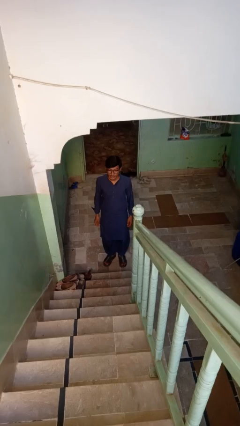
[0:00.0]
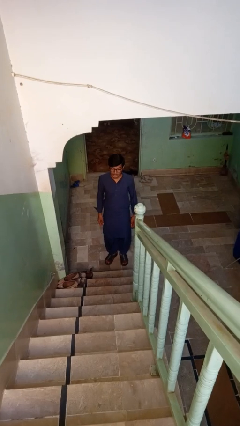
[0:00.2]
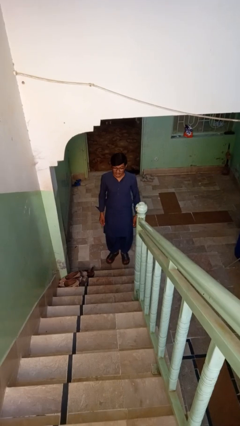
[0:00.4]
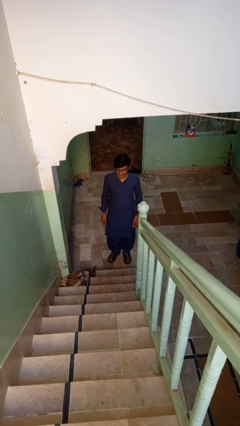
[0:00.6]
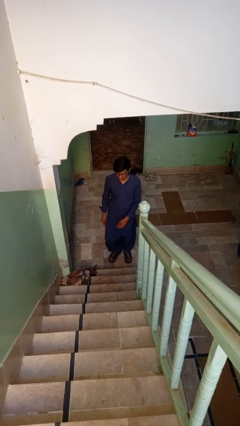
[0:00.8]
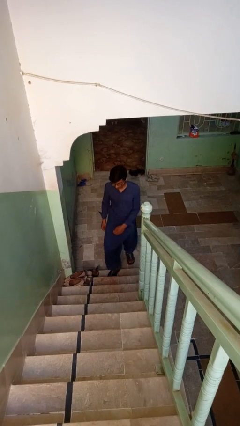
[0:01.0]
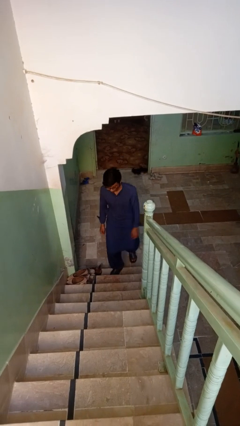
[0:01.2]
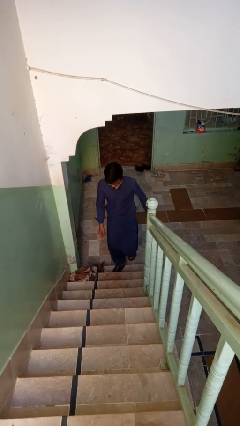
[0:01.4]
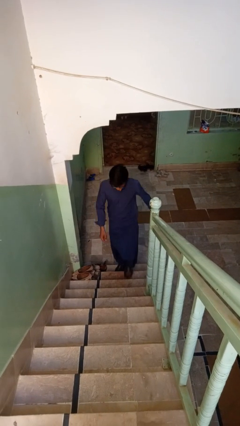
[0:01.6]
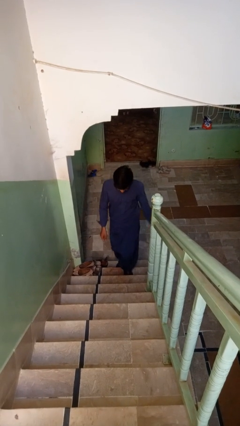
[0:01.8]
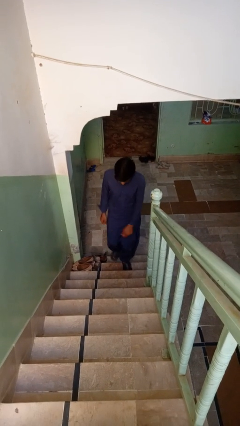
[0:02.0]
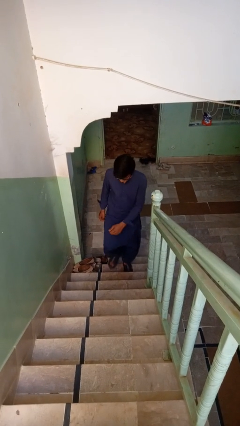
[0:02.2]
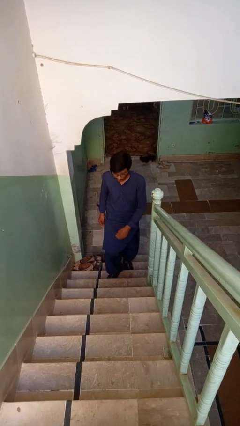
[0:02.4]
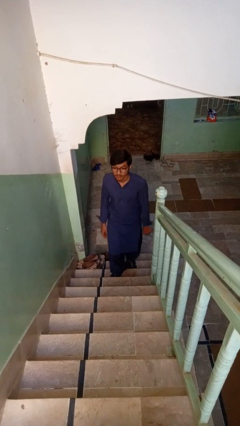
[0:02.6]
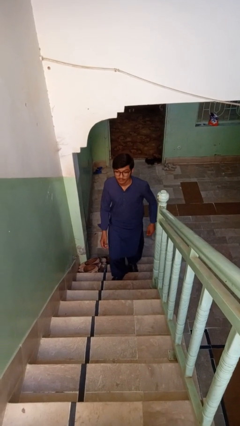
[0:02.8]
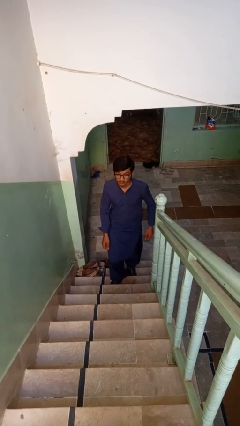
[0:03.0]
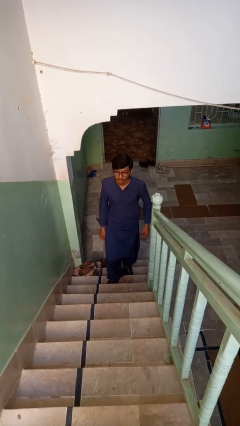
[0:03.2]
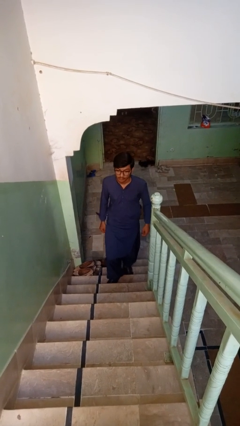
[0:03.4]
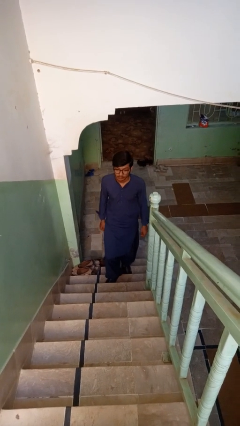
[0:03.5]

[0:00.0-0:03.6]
person climbs up stairs

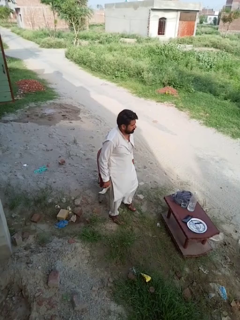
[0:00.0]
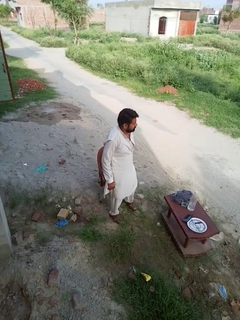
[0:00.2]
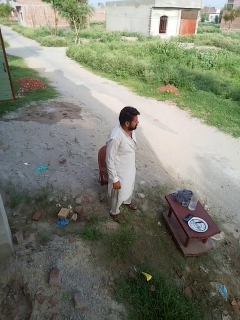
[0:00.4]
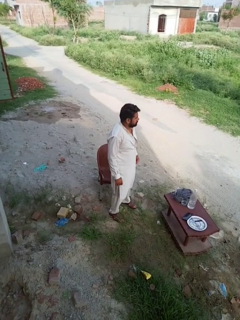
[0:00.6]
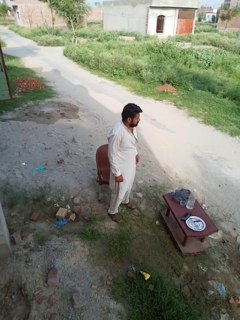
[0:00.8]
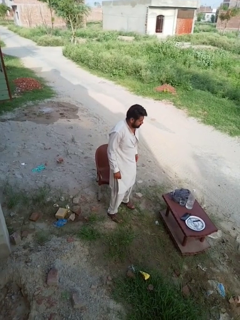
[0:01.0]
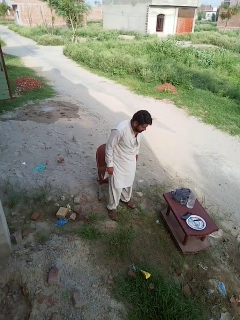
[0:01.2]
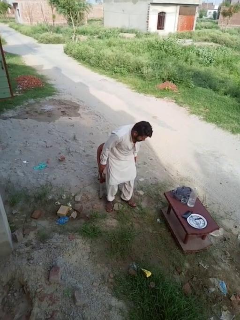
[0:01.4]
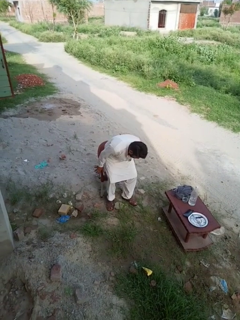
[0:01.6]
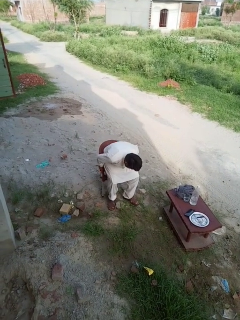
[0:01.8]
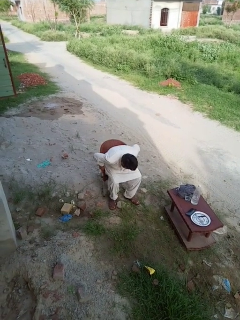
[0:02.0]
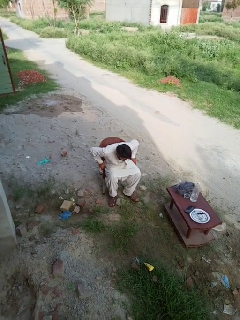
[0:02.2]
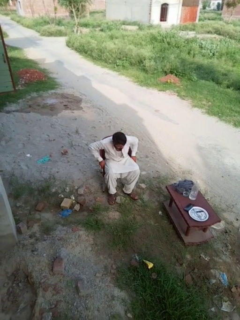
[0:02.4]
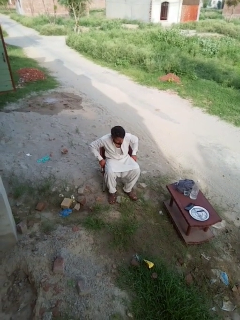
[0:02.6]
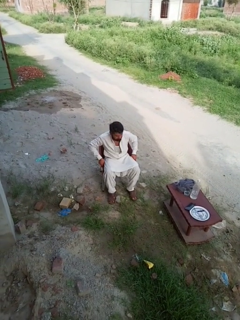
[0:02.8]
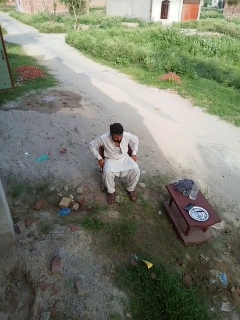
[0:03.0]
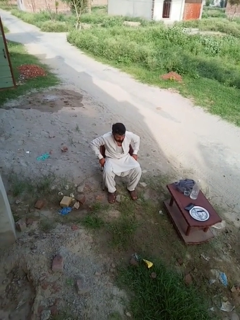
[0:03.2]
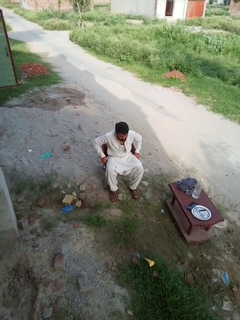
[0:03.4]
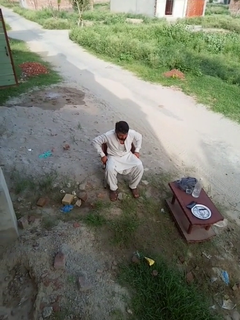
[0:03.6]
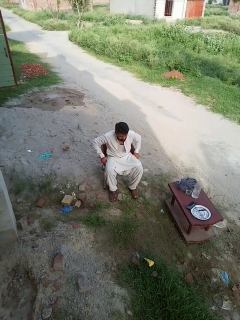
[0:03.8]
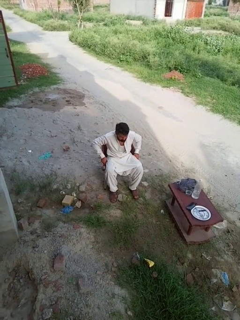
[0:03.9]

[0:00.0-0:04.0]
person sits down

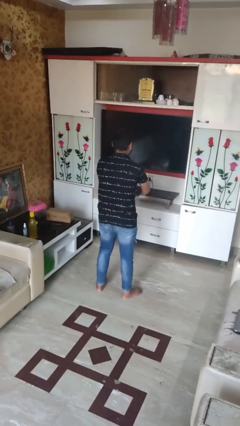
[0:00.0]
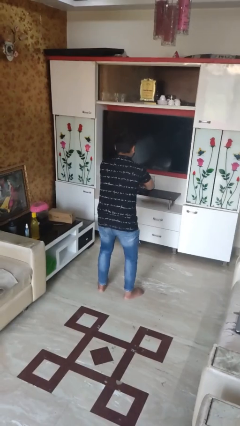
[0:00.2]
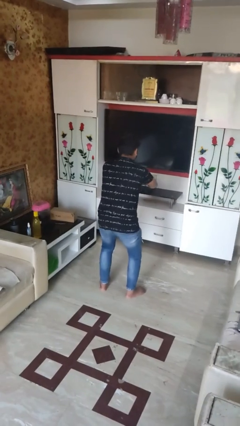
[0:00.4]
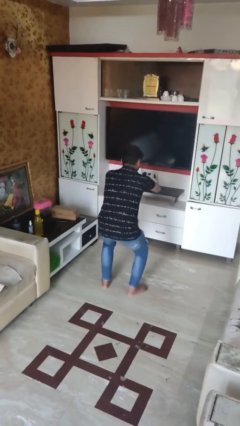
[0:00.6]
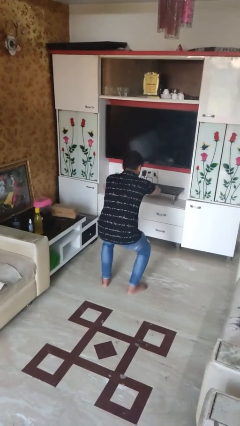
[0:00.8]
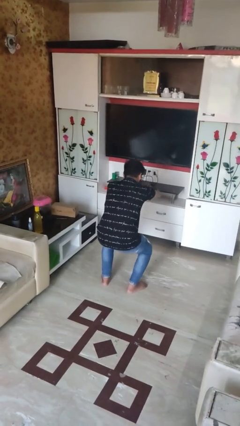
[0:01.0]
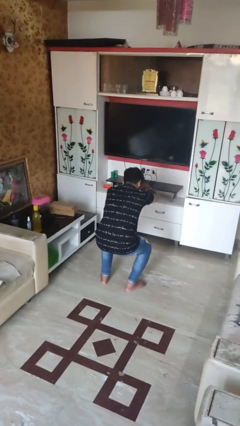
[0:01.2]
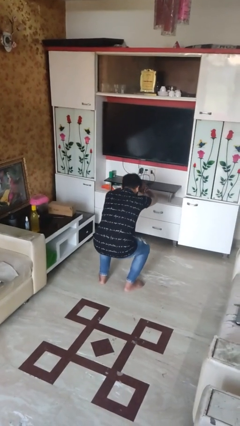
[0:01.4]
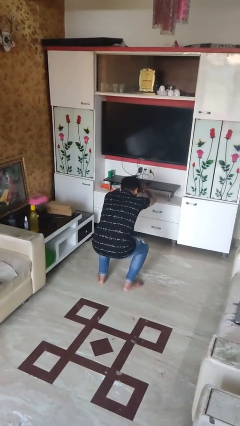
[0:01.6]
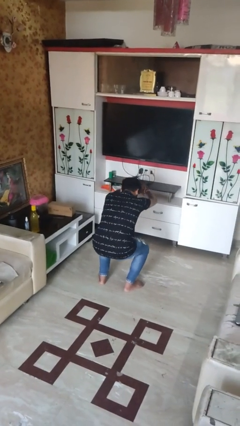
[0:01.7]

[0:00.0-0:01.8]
person squats

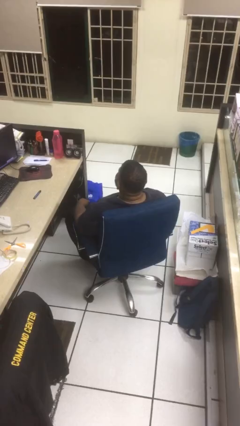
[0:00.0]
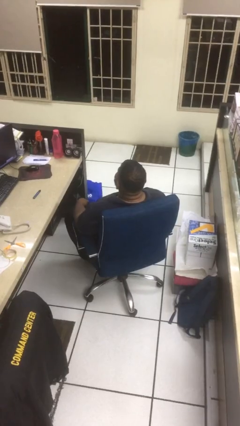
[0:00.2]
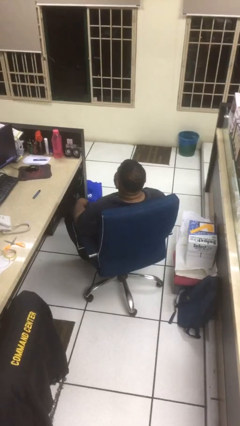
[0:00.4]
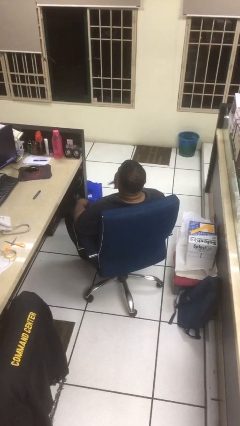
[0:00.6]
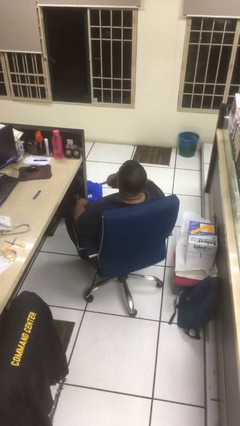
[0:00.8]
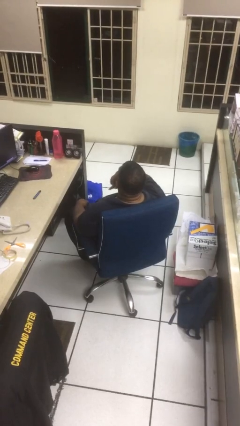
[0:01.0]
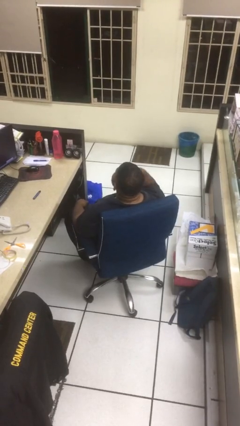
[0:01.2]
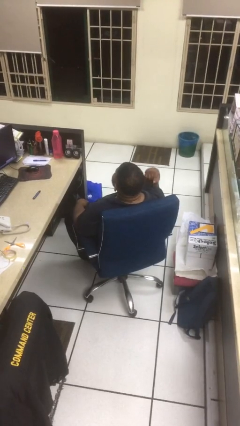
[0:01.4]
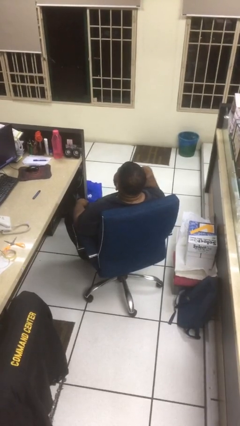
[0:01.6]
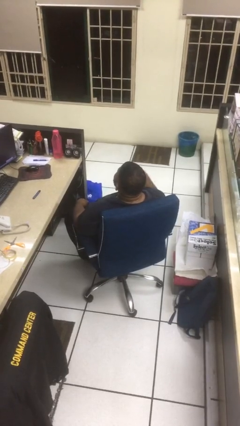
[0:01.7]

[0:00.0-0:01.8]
person gestures cut

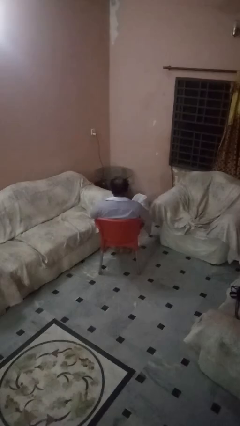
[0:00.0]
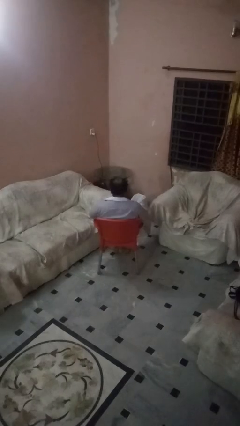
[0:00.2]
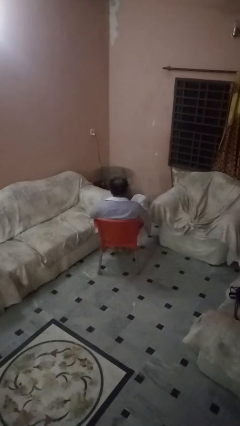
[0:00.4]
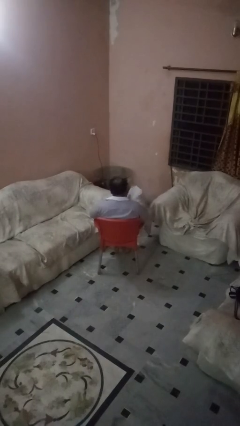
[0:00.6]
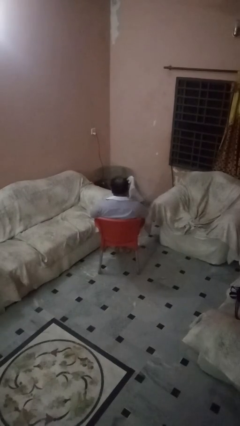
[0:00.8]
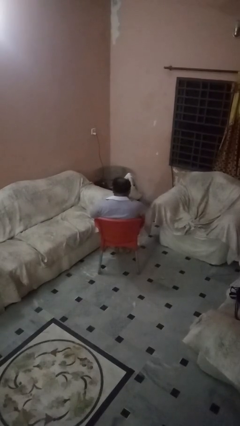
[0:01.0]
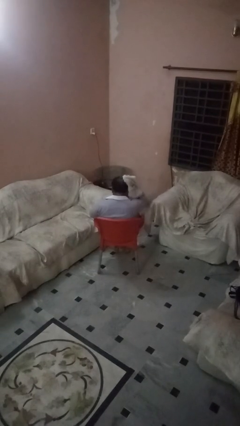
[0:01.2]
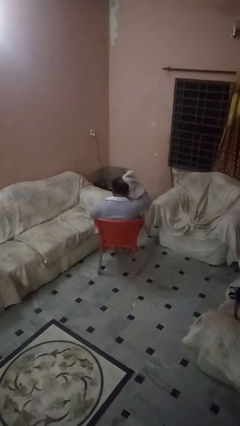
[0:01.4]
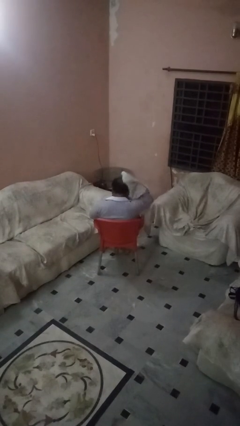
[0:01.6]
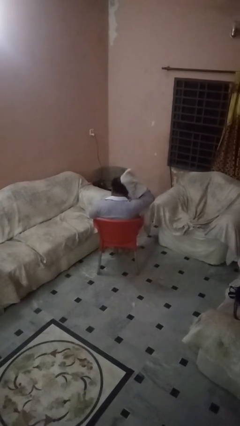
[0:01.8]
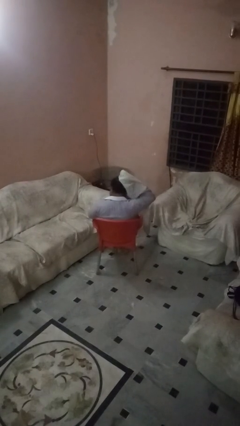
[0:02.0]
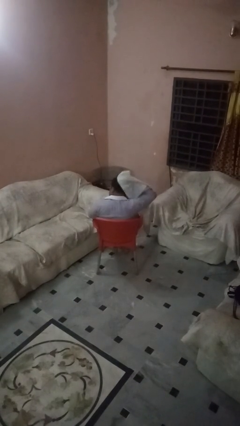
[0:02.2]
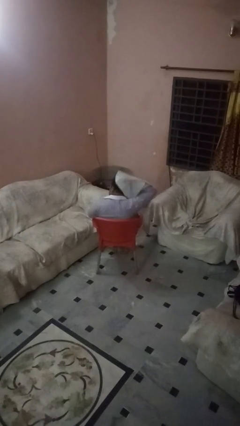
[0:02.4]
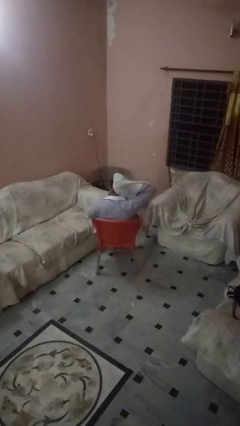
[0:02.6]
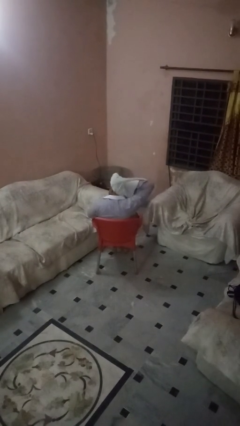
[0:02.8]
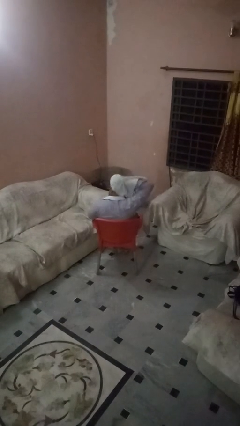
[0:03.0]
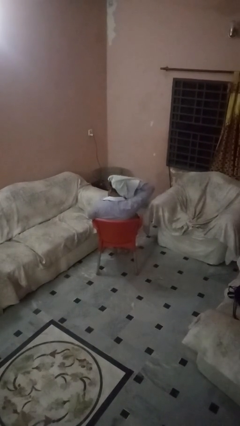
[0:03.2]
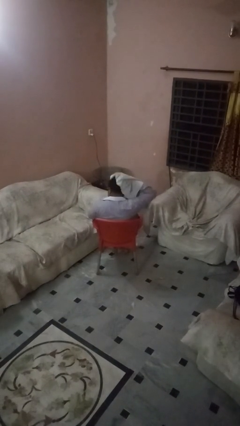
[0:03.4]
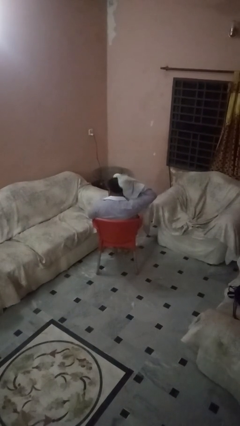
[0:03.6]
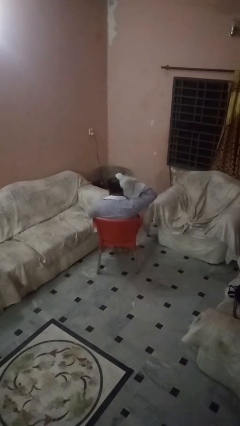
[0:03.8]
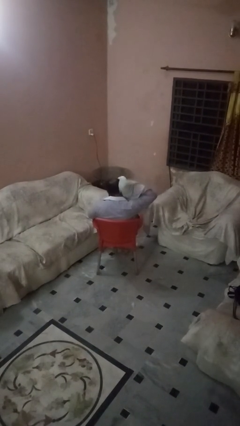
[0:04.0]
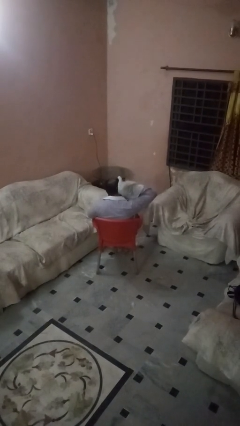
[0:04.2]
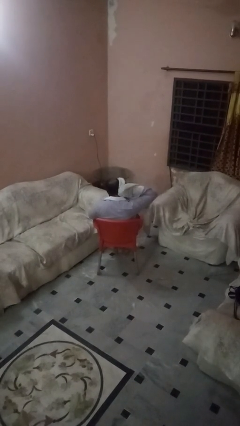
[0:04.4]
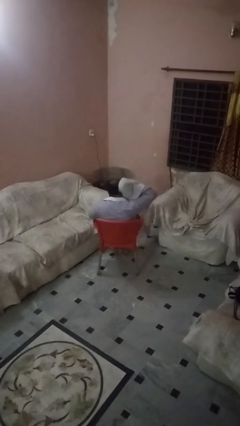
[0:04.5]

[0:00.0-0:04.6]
person dries hair with towel

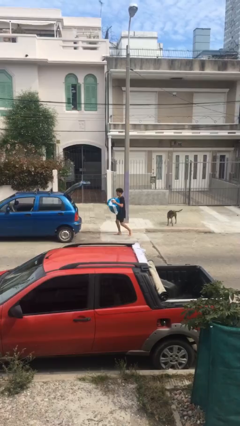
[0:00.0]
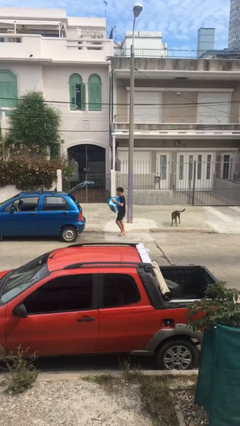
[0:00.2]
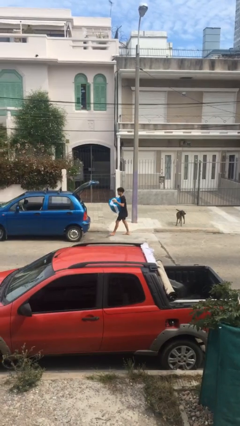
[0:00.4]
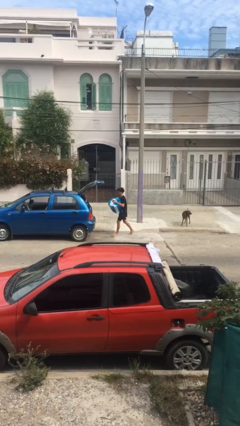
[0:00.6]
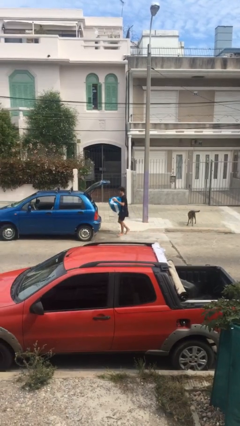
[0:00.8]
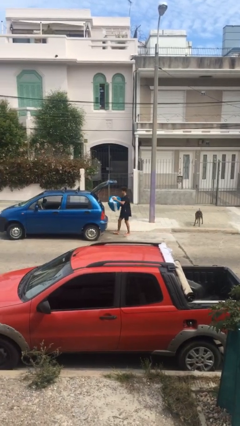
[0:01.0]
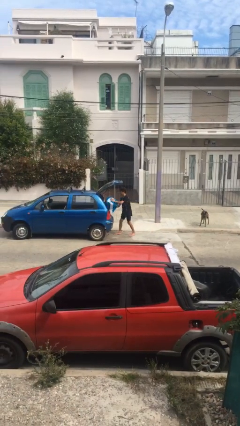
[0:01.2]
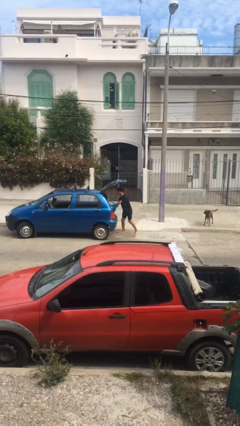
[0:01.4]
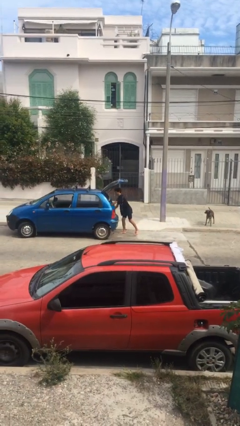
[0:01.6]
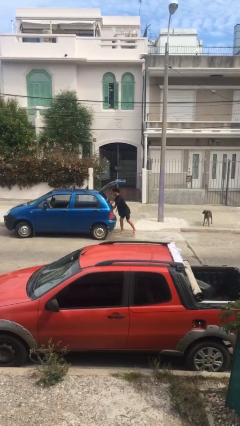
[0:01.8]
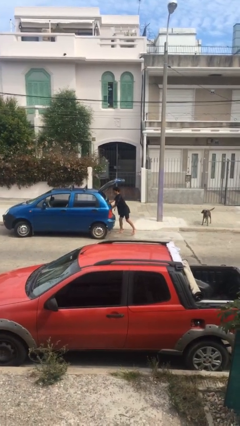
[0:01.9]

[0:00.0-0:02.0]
person loads car

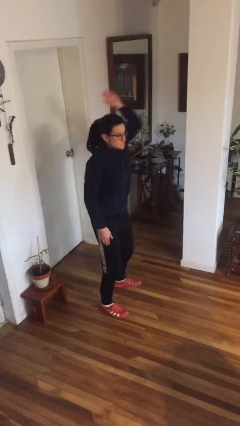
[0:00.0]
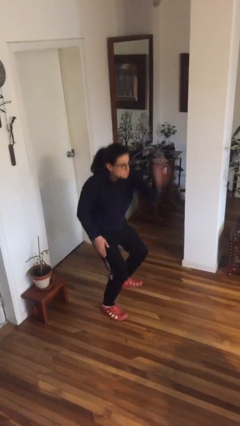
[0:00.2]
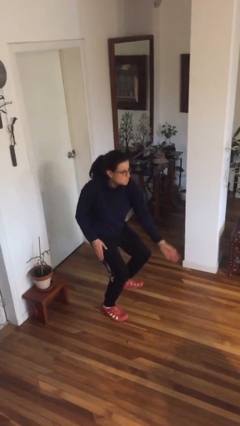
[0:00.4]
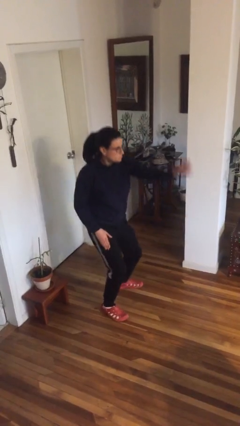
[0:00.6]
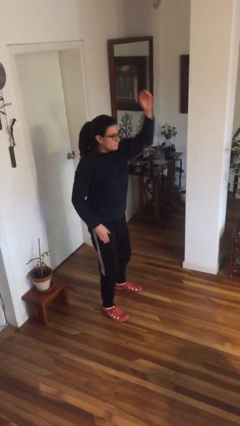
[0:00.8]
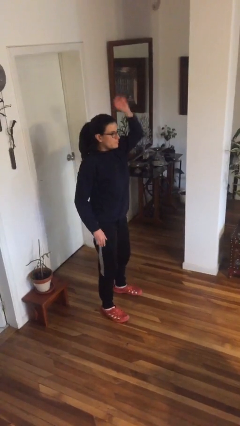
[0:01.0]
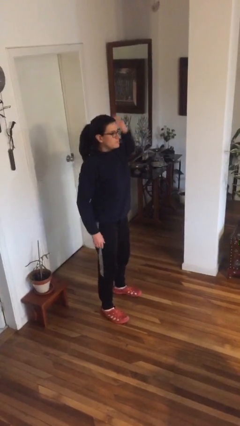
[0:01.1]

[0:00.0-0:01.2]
person karate chop
